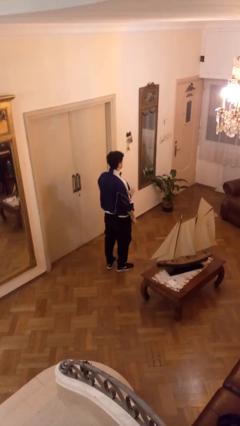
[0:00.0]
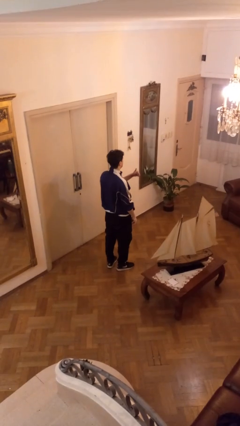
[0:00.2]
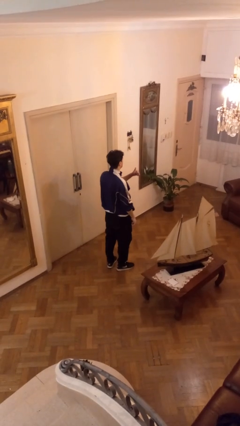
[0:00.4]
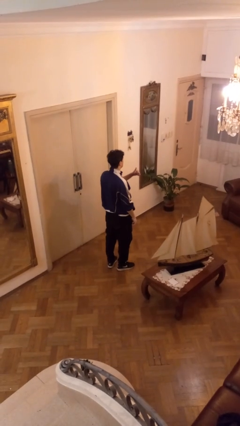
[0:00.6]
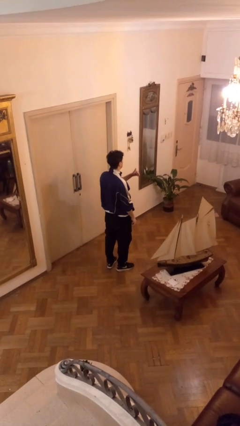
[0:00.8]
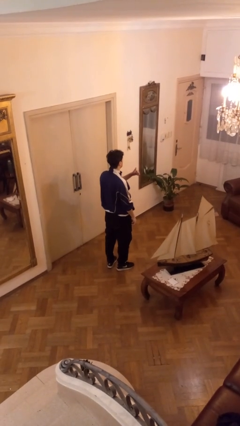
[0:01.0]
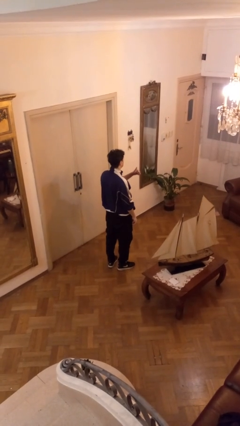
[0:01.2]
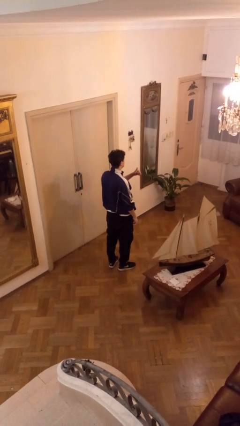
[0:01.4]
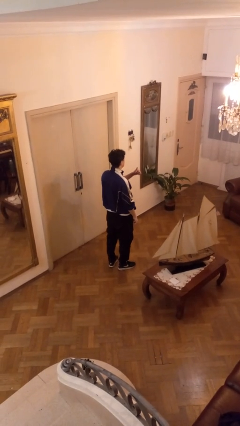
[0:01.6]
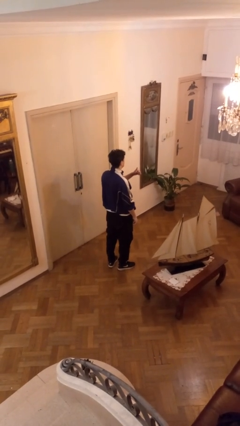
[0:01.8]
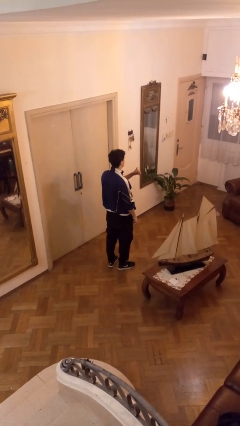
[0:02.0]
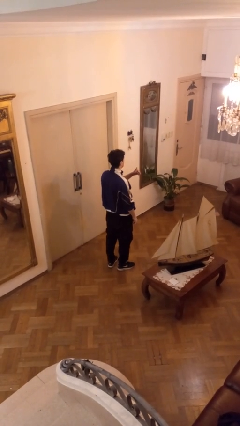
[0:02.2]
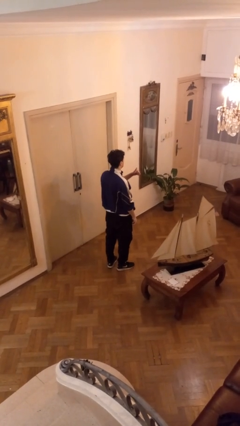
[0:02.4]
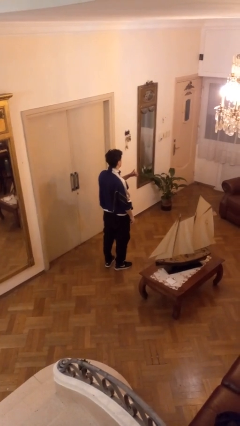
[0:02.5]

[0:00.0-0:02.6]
person gestures thumbs up

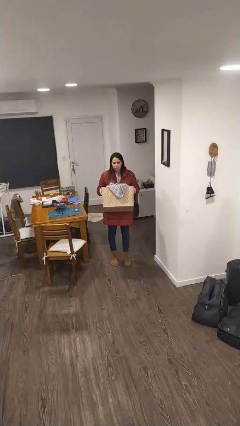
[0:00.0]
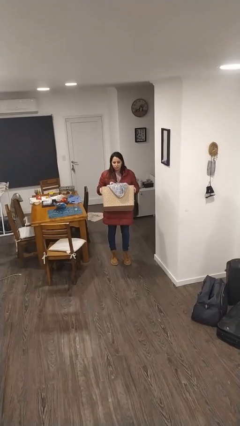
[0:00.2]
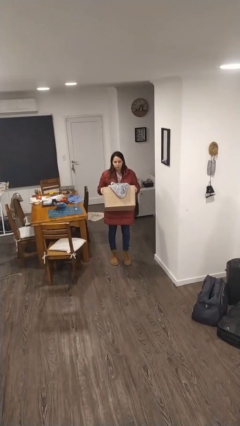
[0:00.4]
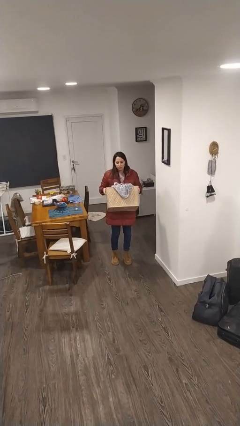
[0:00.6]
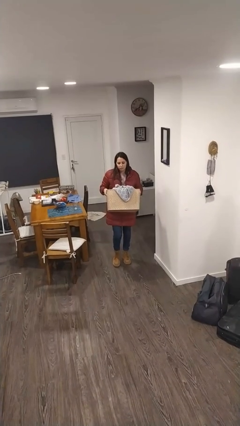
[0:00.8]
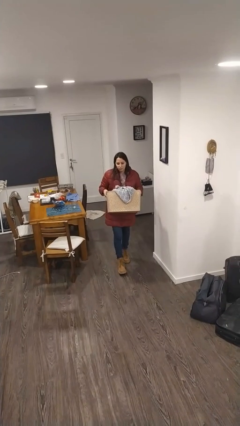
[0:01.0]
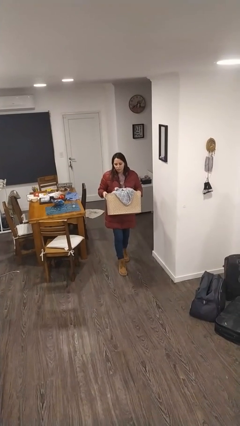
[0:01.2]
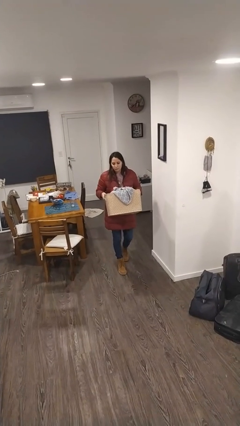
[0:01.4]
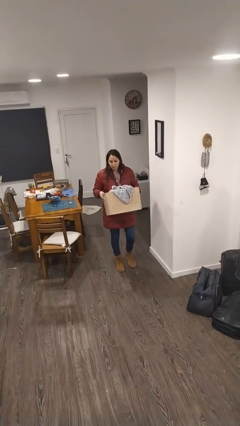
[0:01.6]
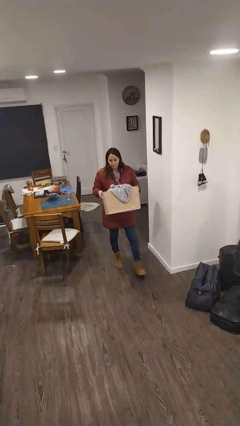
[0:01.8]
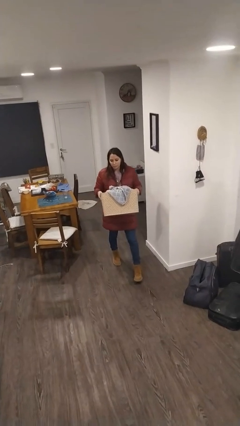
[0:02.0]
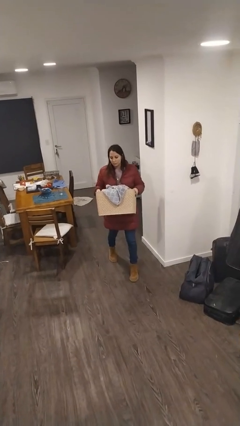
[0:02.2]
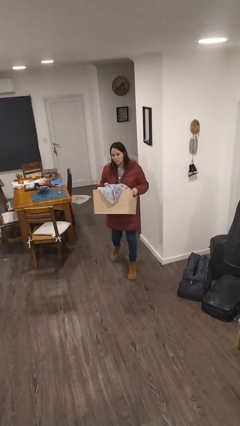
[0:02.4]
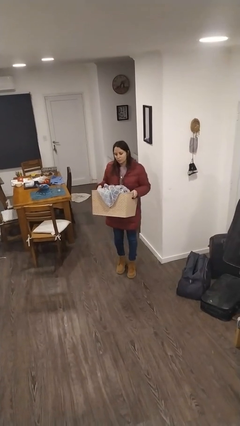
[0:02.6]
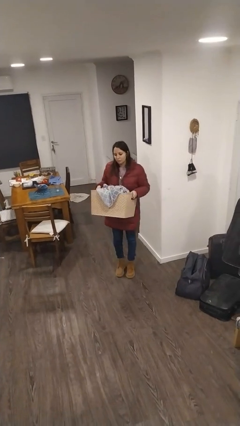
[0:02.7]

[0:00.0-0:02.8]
person carries laundry basket

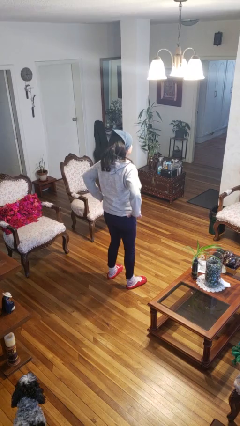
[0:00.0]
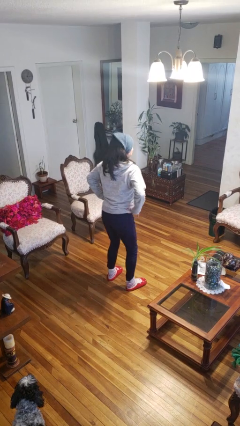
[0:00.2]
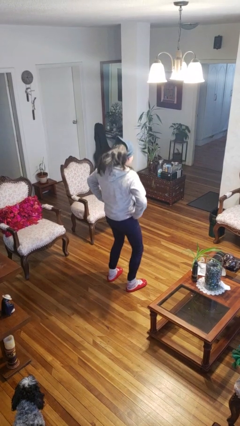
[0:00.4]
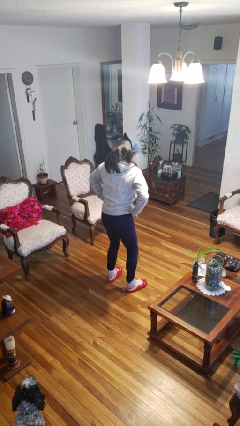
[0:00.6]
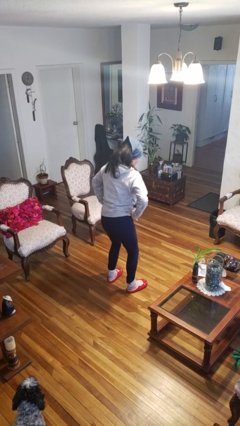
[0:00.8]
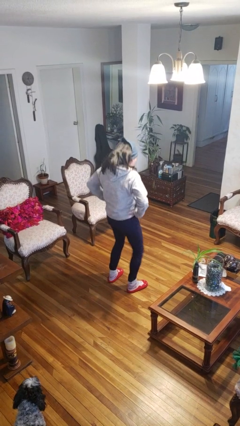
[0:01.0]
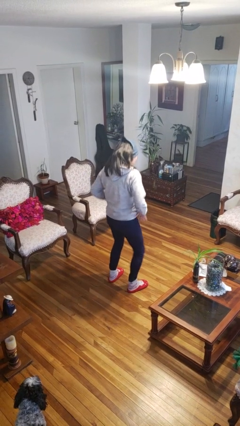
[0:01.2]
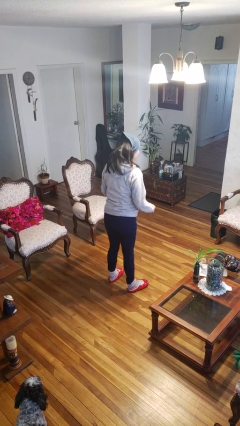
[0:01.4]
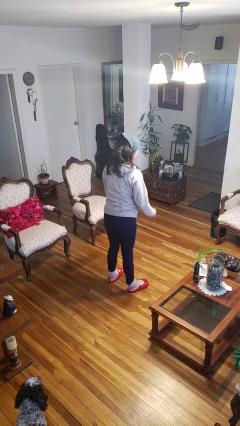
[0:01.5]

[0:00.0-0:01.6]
person wiggles hips

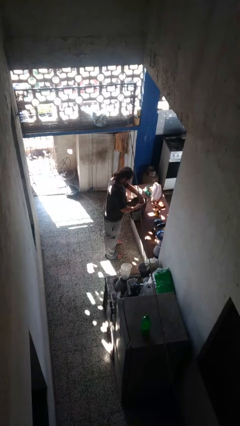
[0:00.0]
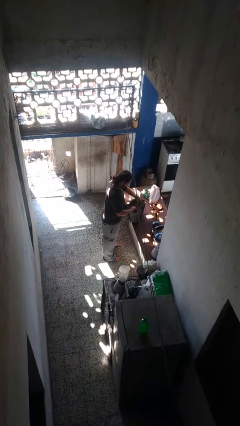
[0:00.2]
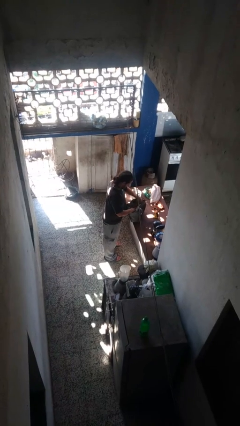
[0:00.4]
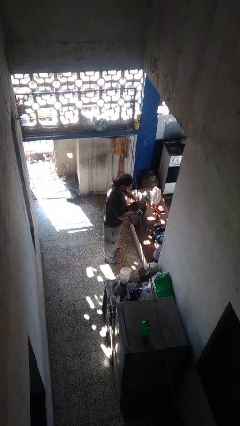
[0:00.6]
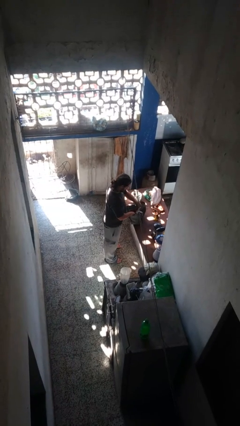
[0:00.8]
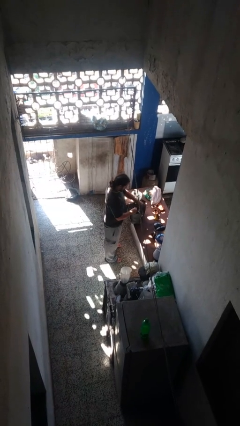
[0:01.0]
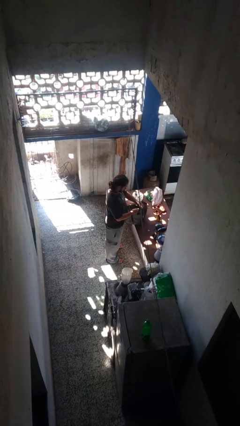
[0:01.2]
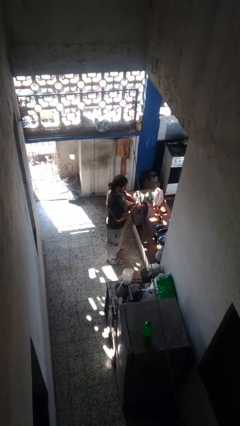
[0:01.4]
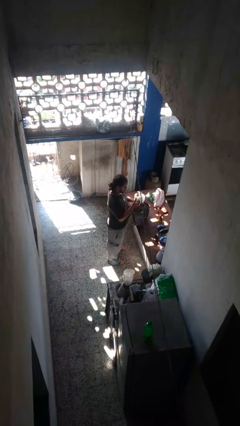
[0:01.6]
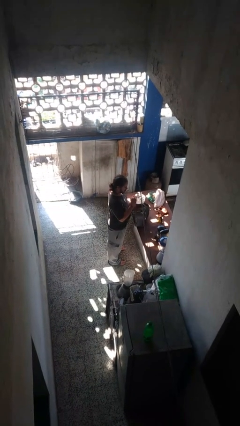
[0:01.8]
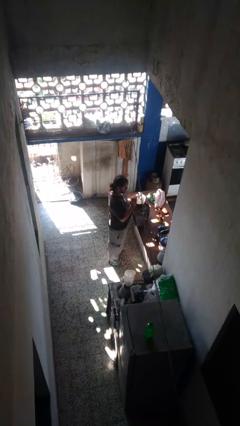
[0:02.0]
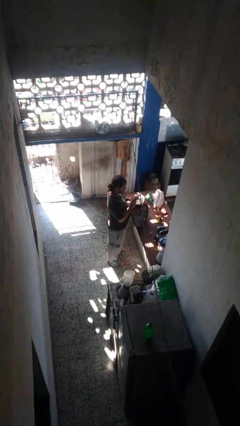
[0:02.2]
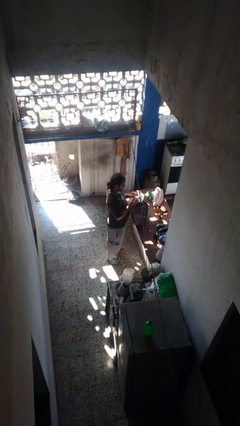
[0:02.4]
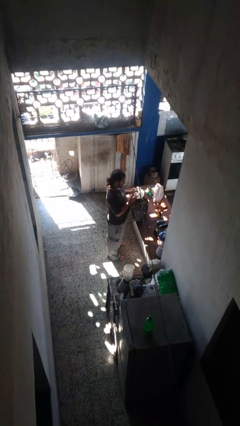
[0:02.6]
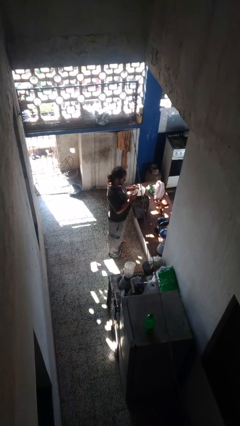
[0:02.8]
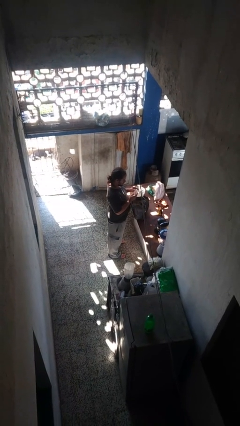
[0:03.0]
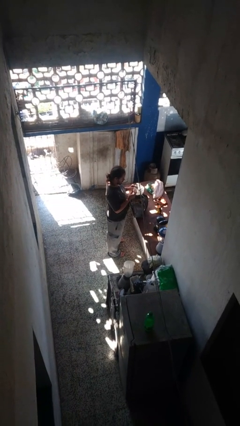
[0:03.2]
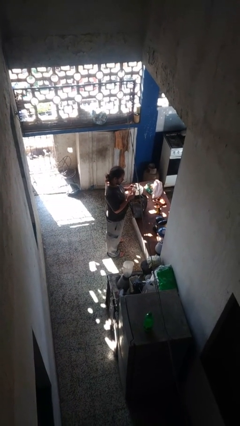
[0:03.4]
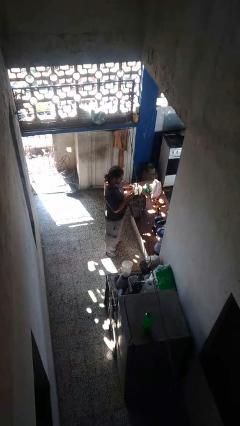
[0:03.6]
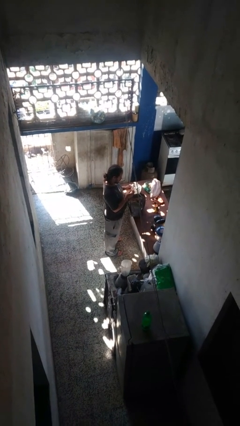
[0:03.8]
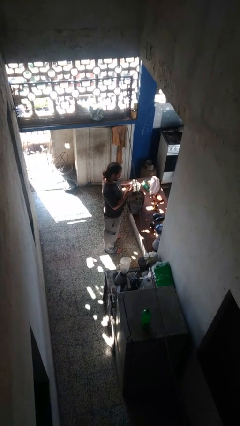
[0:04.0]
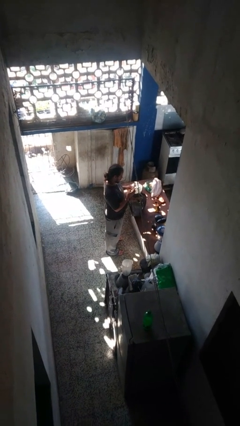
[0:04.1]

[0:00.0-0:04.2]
person takes object from purse

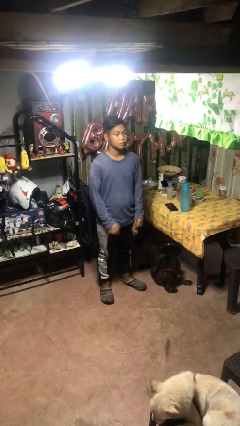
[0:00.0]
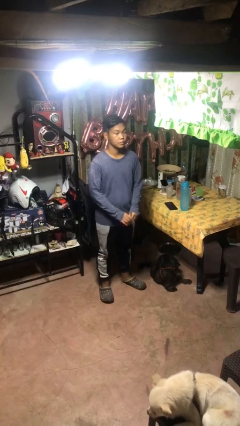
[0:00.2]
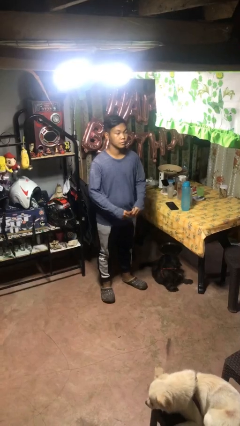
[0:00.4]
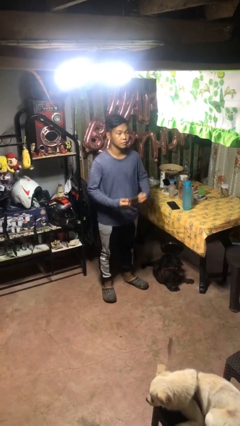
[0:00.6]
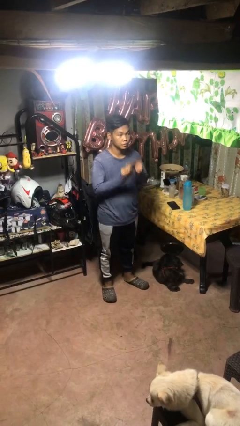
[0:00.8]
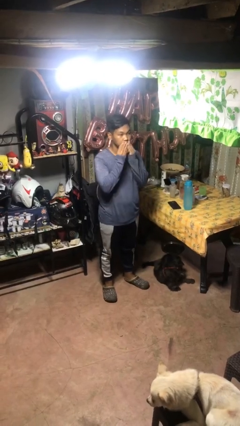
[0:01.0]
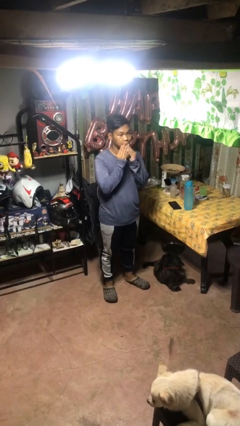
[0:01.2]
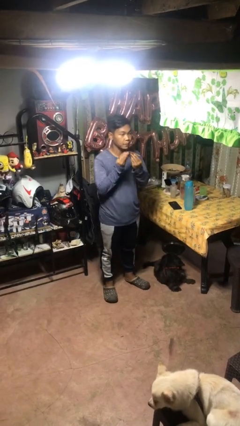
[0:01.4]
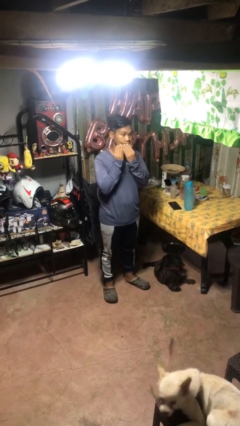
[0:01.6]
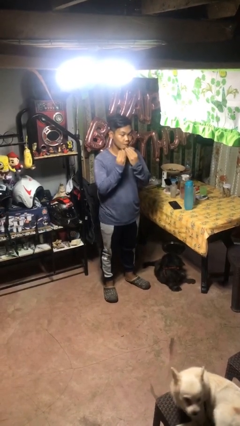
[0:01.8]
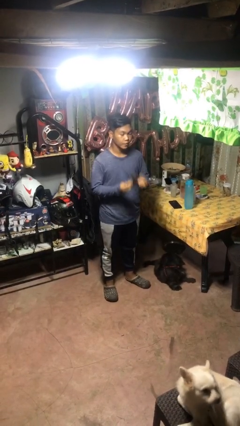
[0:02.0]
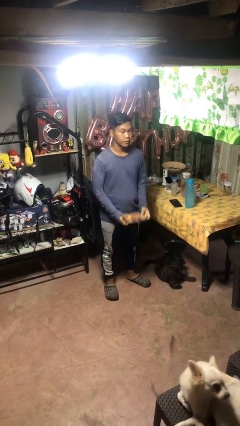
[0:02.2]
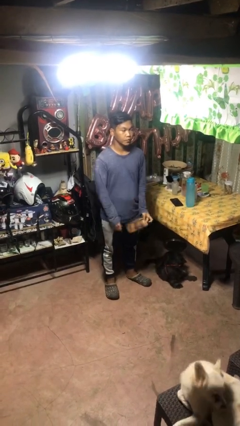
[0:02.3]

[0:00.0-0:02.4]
person wipes mouth with napkin

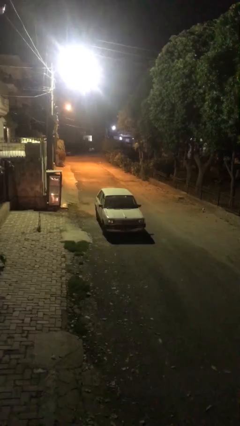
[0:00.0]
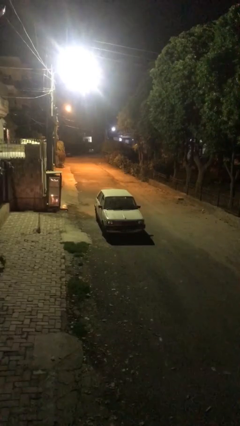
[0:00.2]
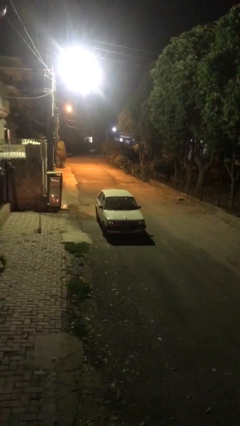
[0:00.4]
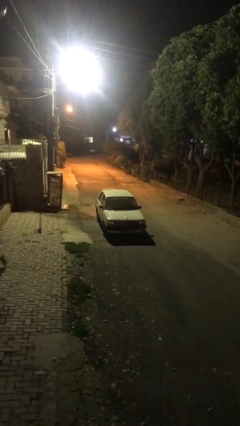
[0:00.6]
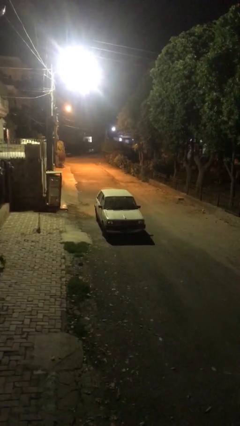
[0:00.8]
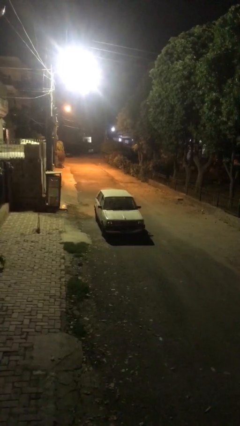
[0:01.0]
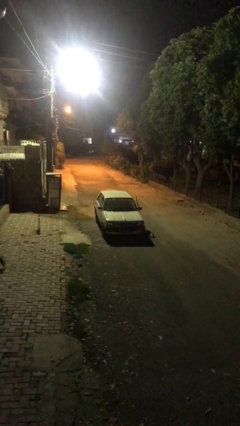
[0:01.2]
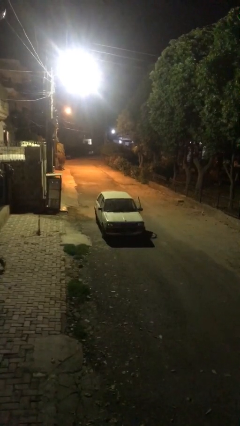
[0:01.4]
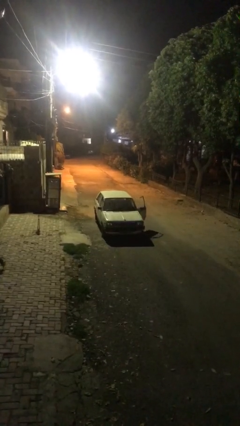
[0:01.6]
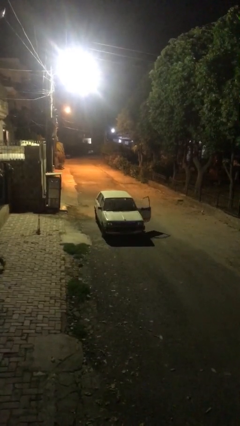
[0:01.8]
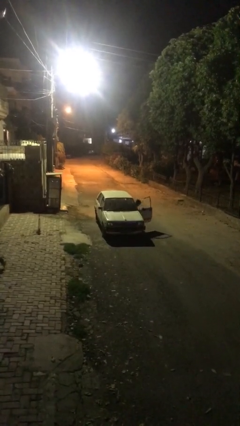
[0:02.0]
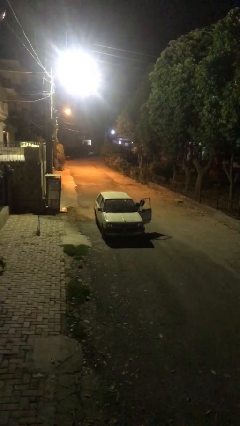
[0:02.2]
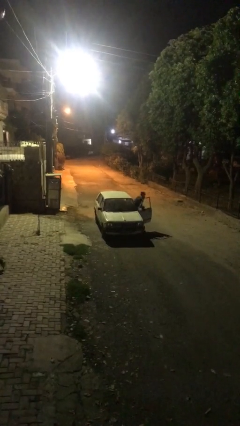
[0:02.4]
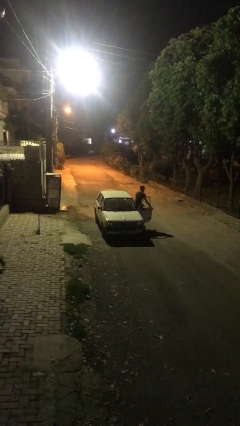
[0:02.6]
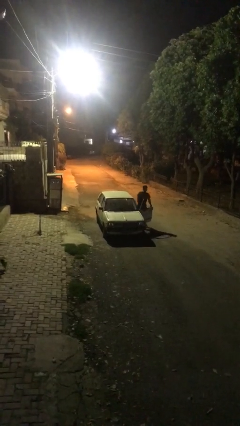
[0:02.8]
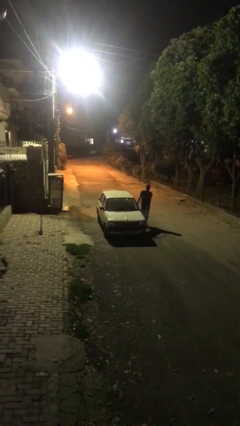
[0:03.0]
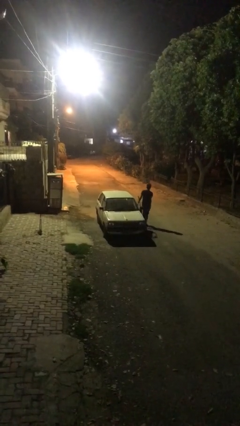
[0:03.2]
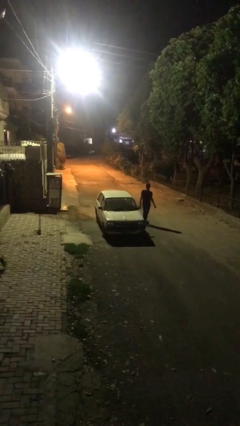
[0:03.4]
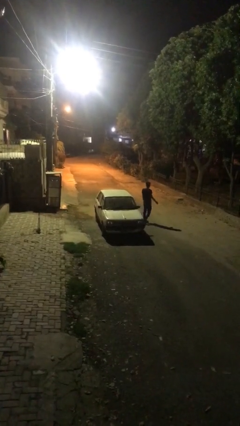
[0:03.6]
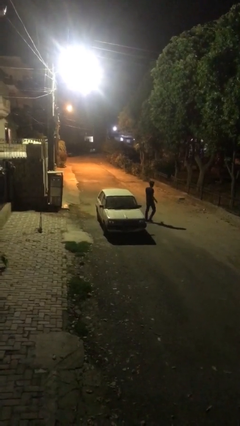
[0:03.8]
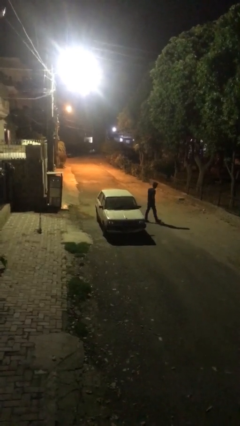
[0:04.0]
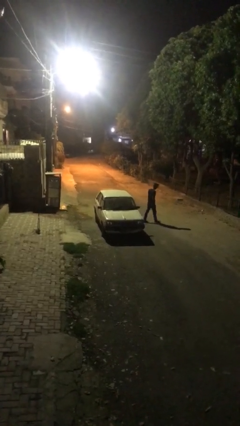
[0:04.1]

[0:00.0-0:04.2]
car drops off person
